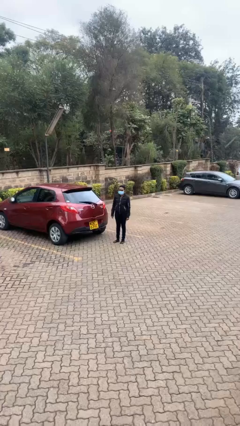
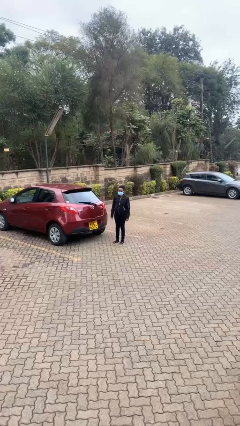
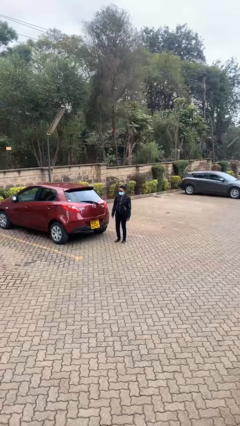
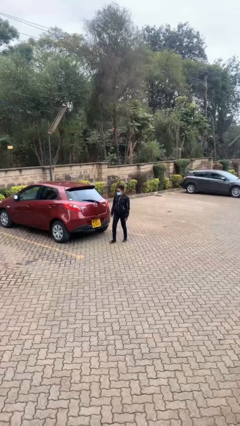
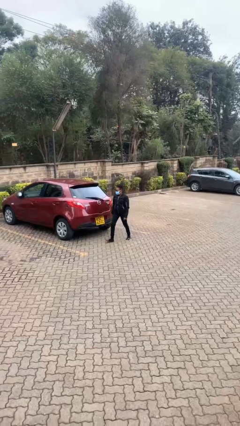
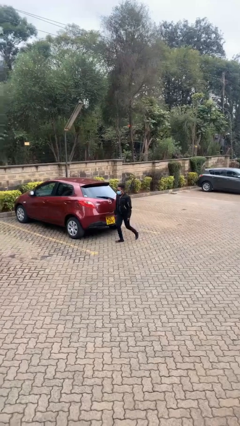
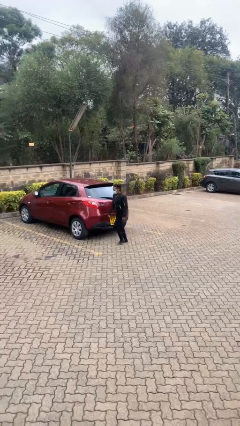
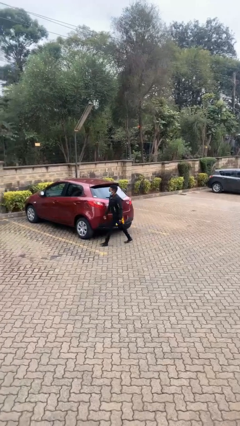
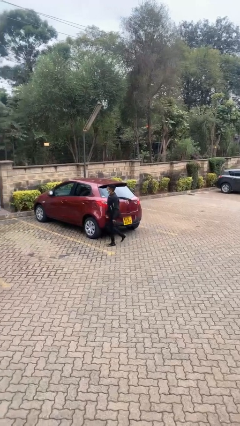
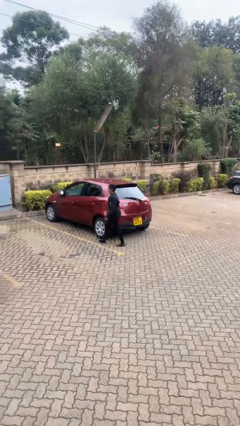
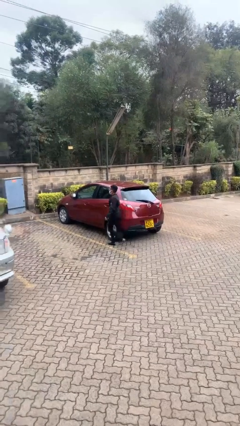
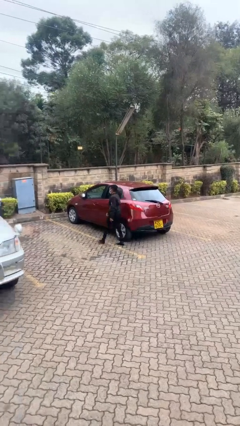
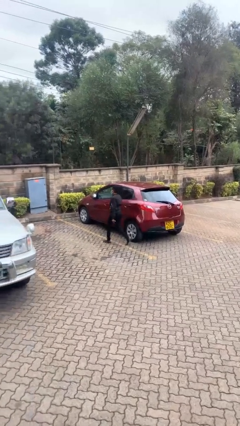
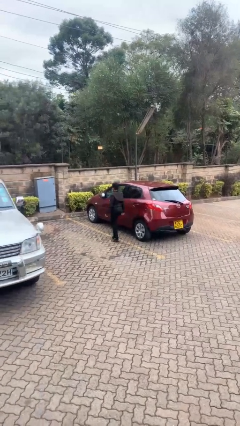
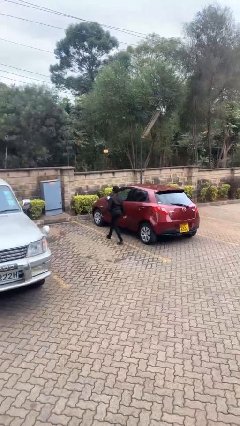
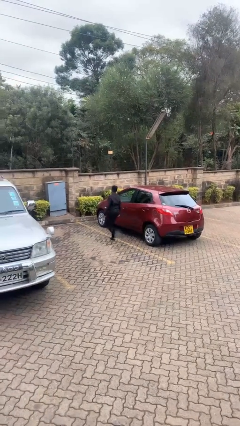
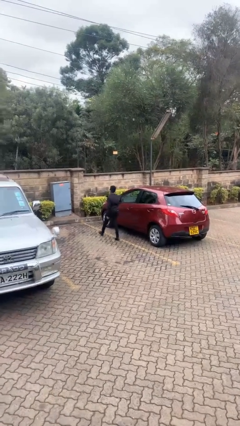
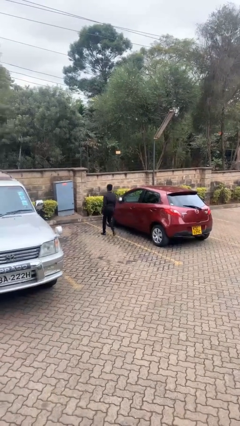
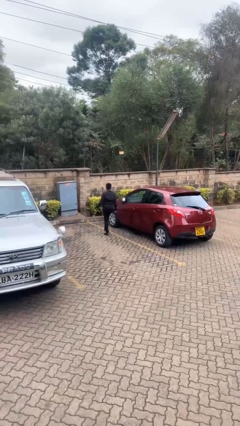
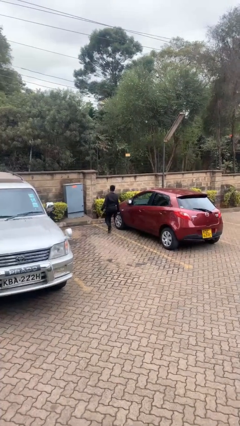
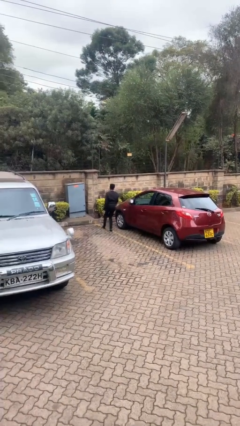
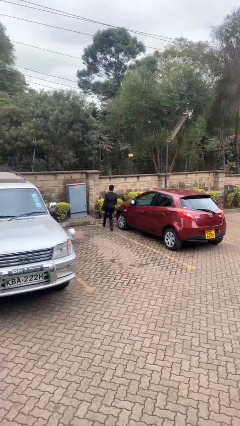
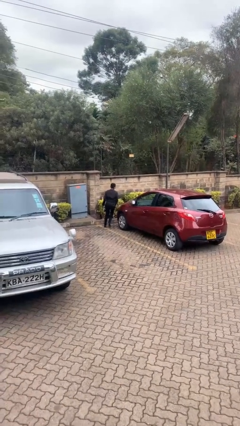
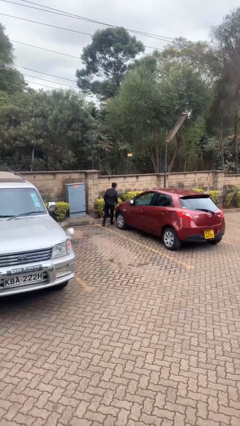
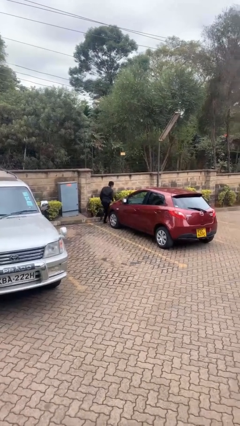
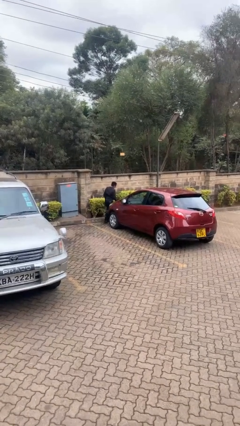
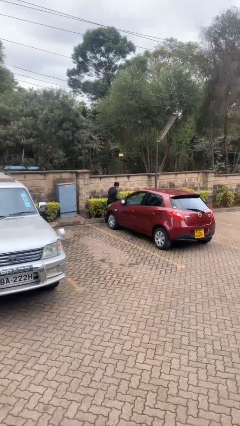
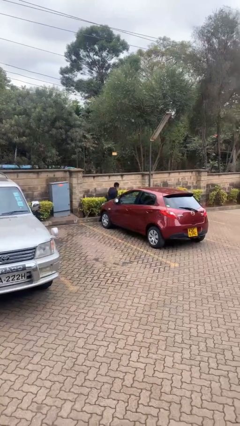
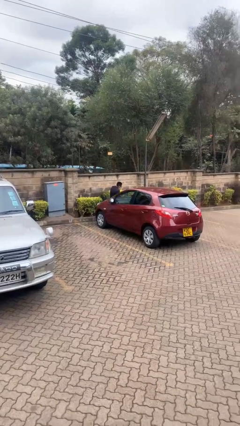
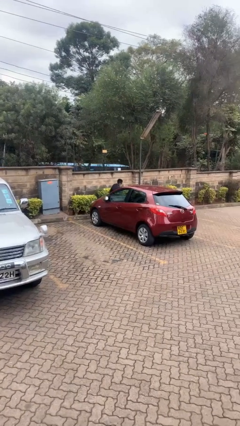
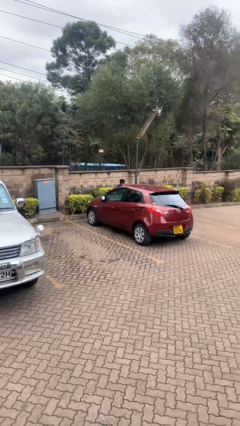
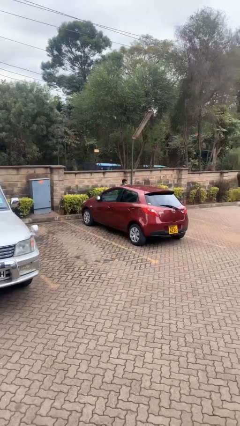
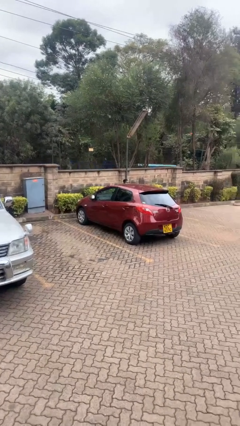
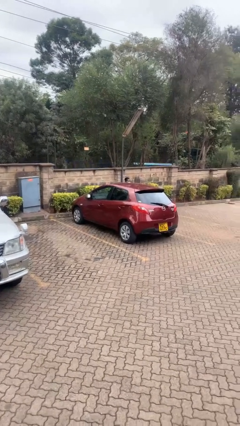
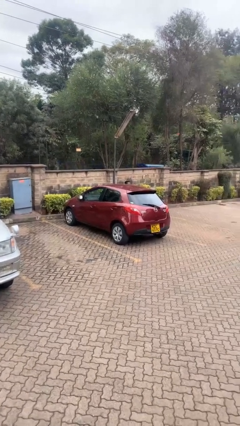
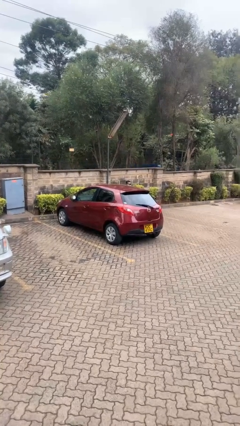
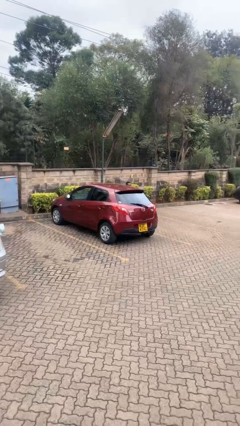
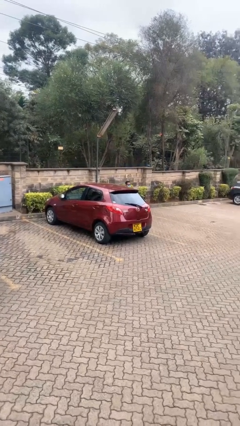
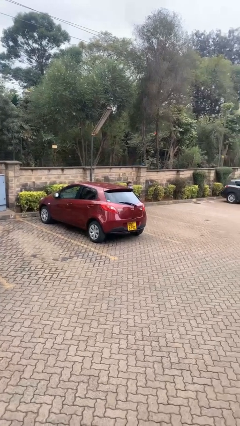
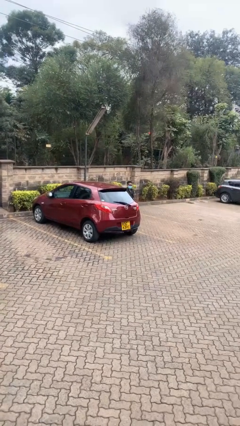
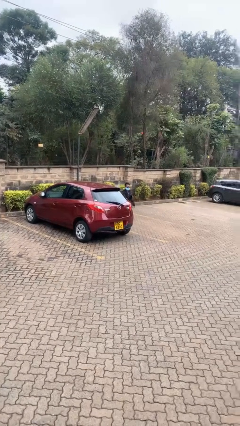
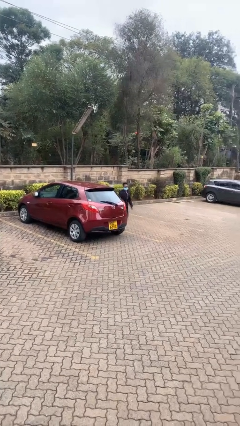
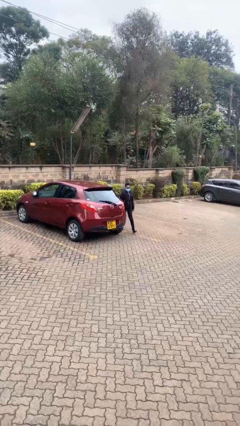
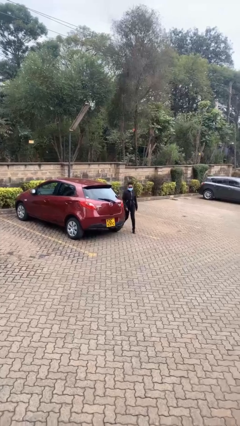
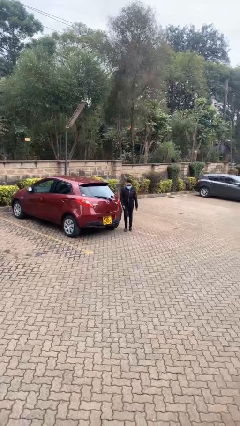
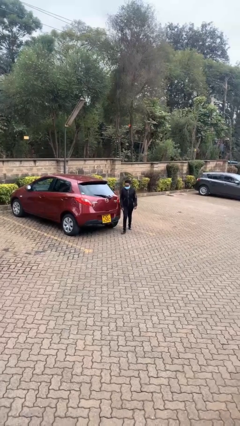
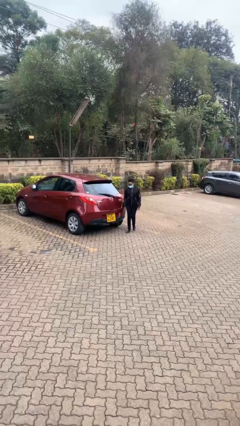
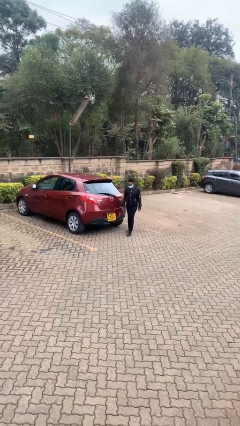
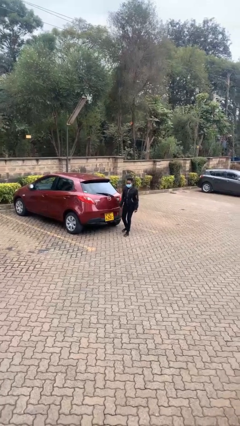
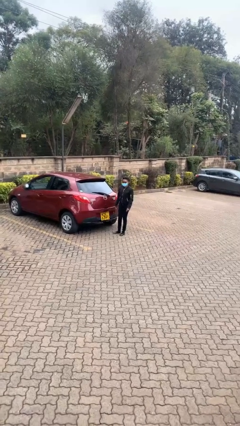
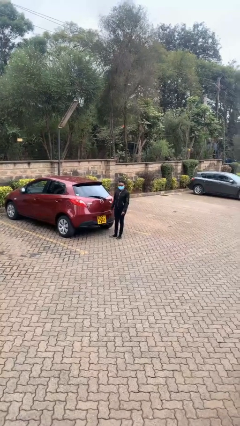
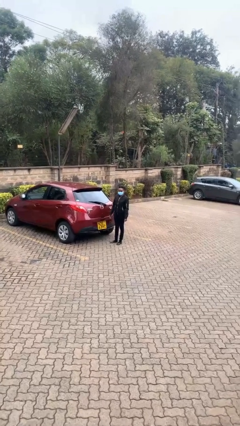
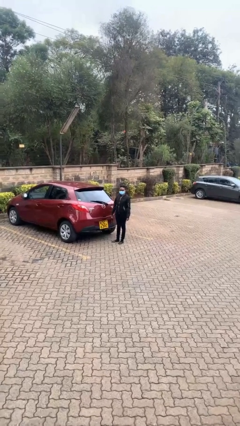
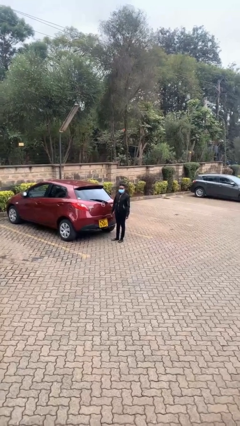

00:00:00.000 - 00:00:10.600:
person walks around car

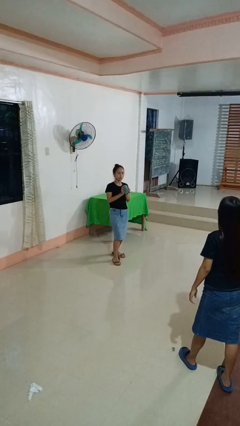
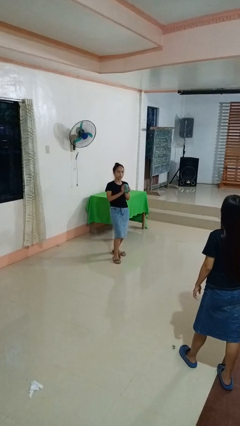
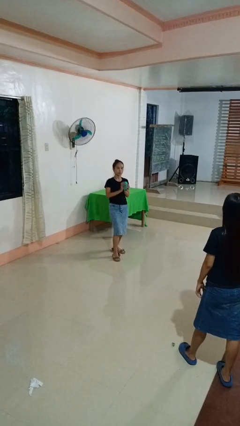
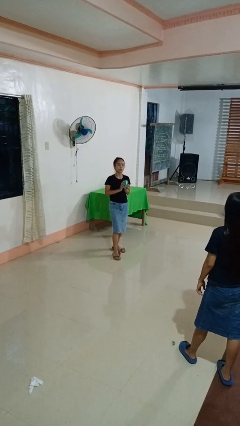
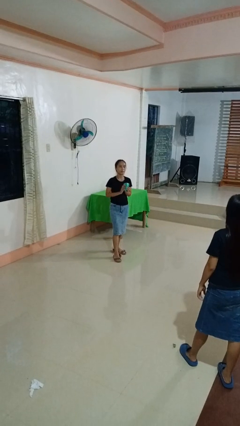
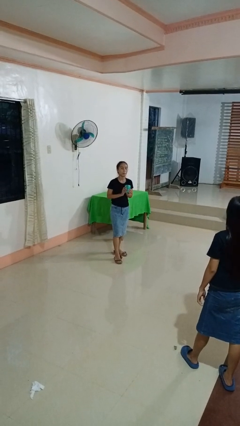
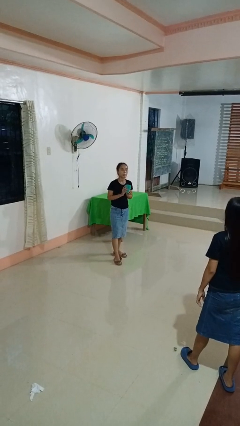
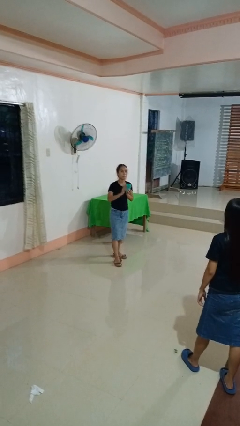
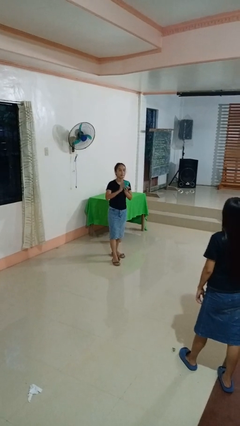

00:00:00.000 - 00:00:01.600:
person catches object from person

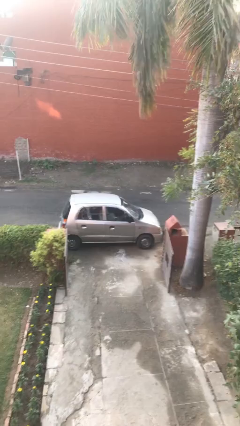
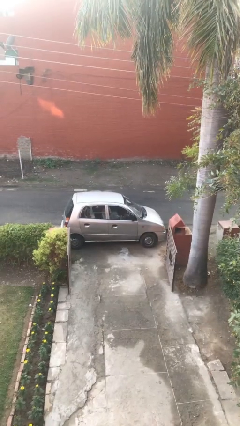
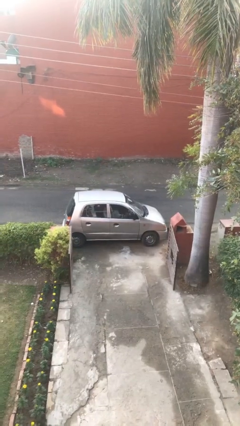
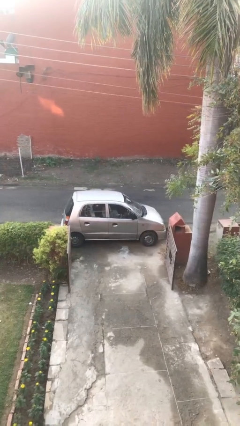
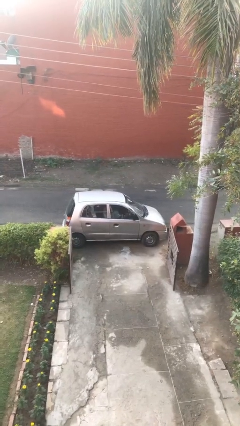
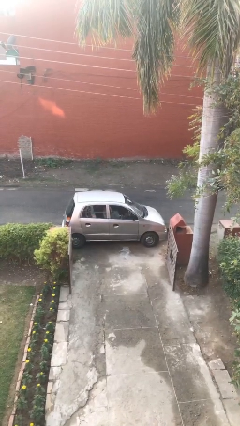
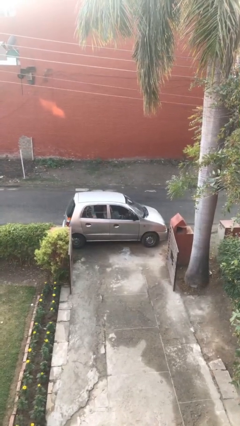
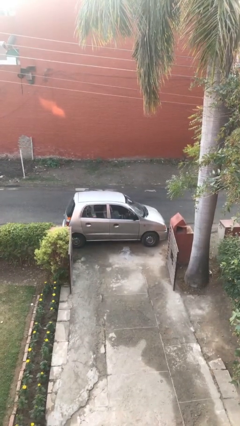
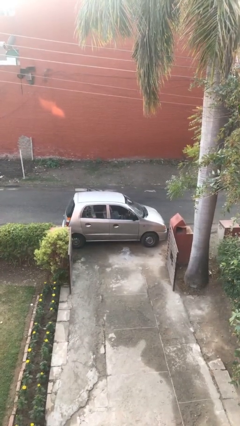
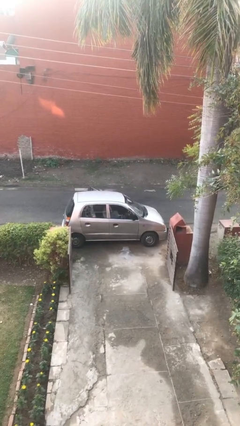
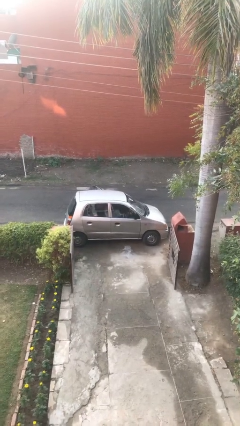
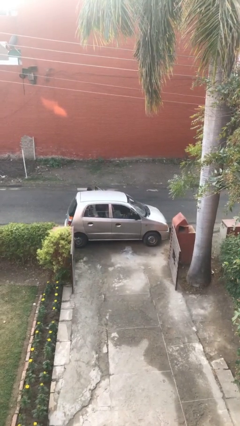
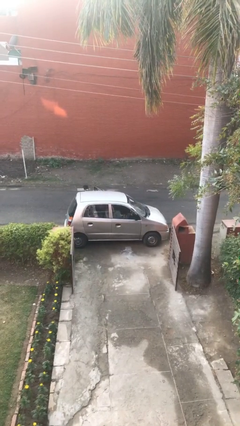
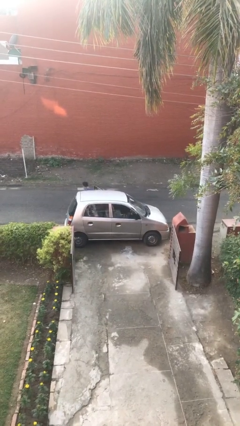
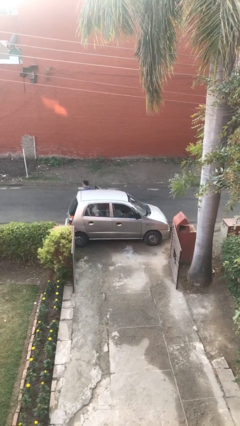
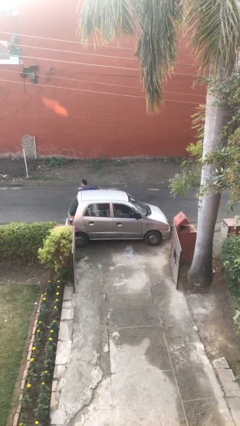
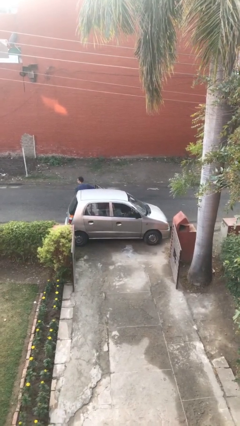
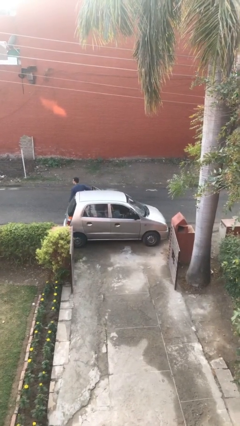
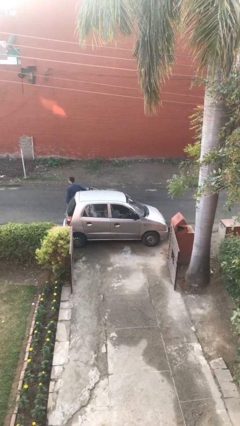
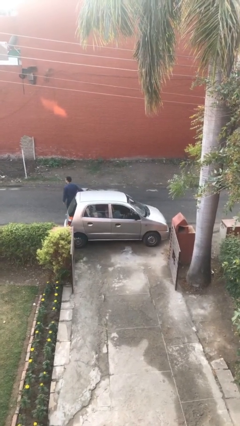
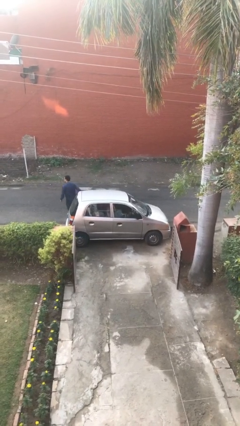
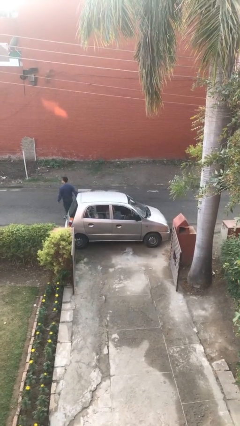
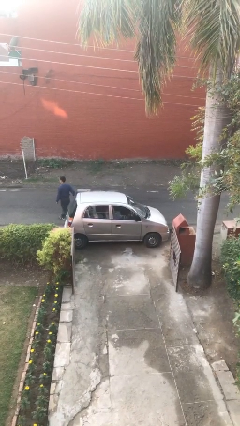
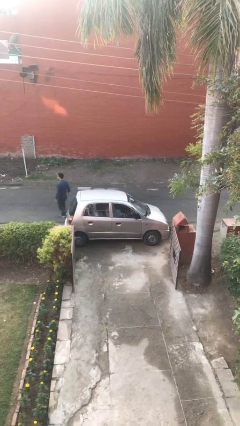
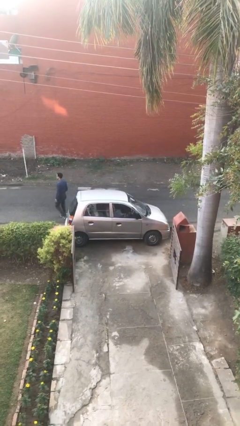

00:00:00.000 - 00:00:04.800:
car drops off person

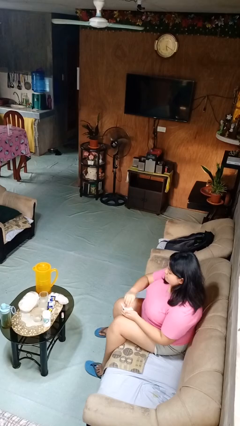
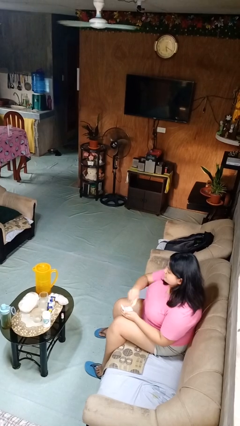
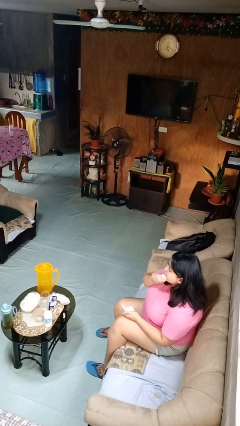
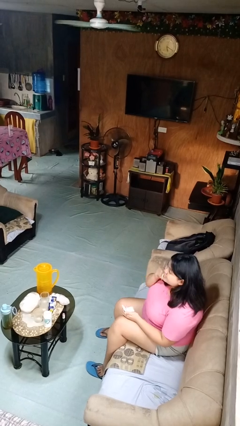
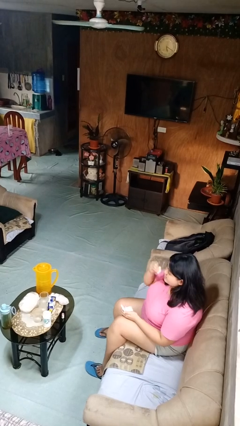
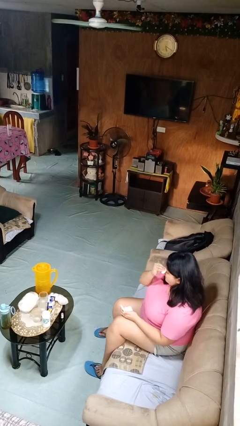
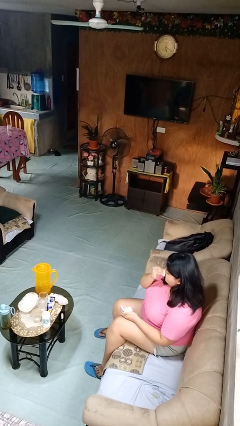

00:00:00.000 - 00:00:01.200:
person applies foundation makeup
